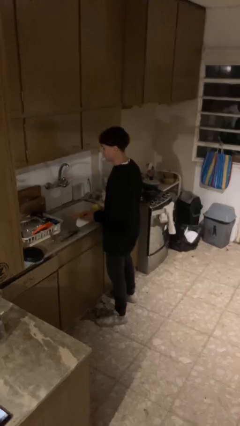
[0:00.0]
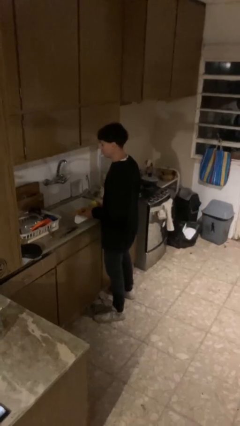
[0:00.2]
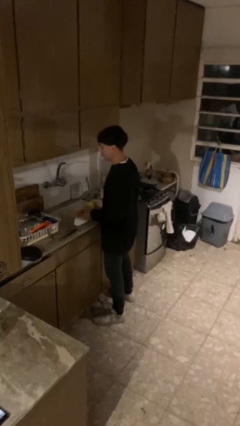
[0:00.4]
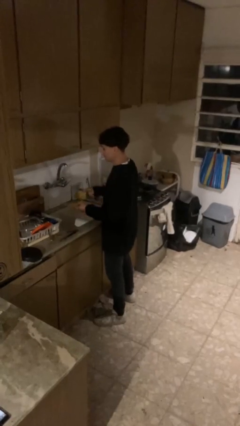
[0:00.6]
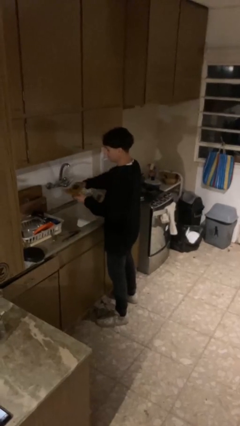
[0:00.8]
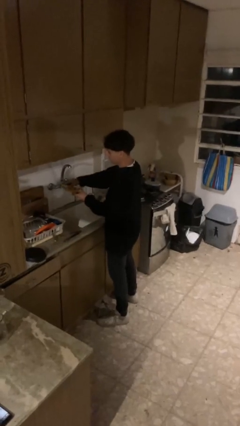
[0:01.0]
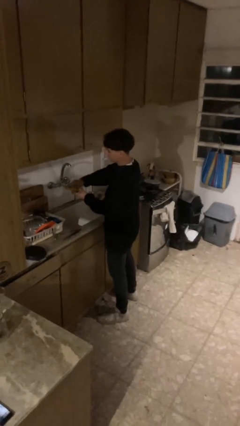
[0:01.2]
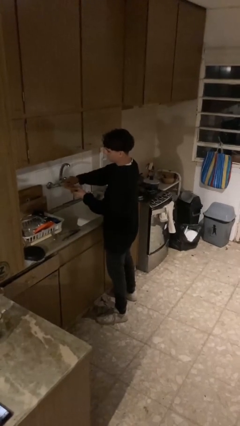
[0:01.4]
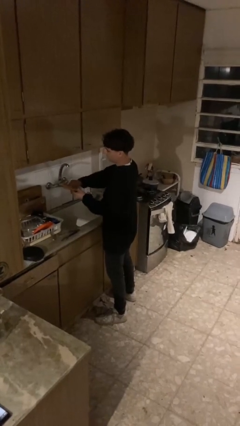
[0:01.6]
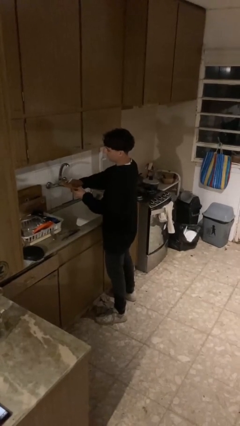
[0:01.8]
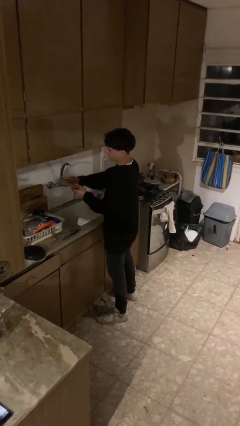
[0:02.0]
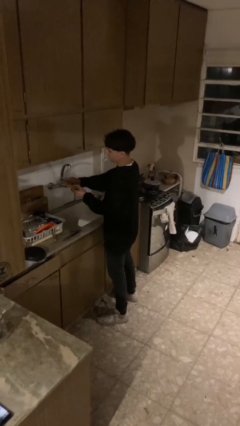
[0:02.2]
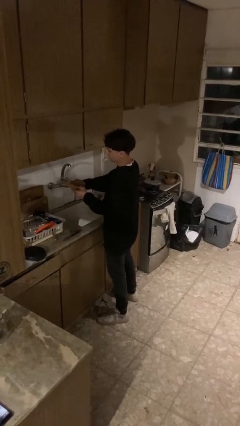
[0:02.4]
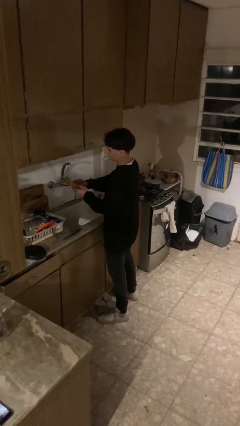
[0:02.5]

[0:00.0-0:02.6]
person washes dish

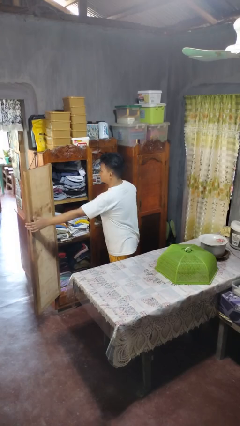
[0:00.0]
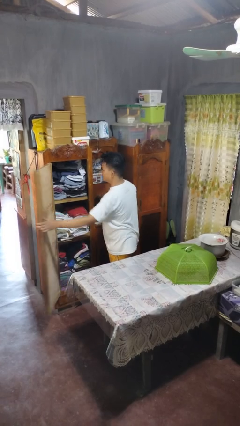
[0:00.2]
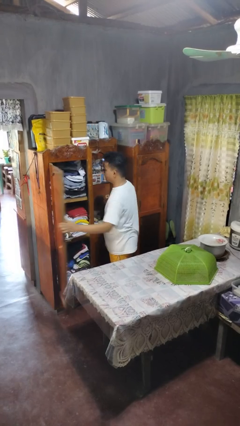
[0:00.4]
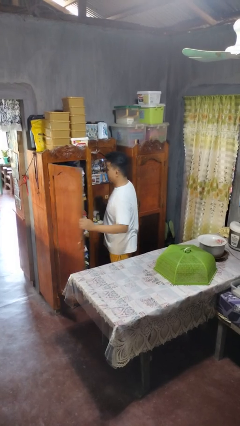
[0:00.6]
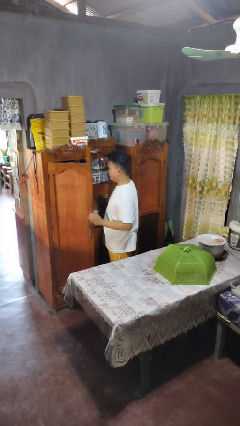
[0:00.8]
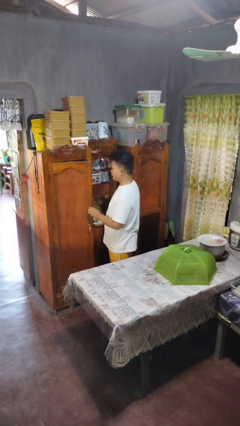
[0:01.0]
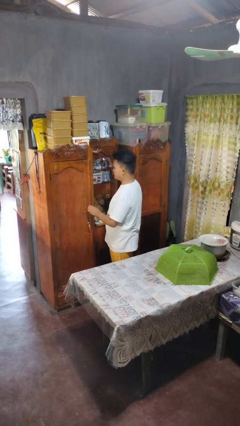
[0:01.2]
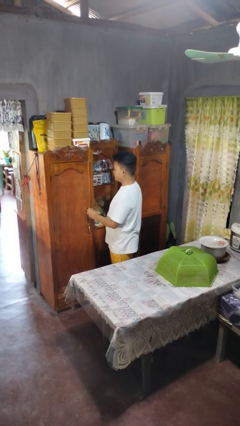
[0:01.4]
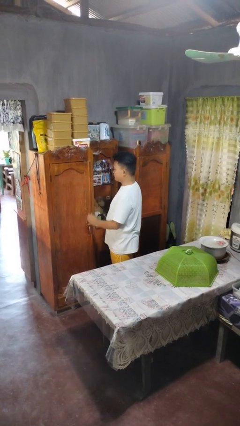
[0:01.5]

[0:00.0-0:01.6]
person closes closet door

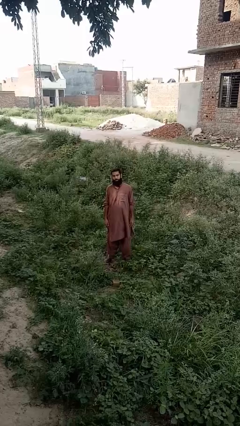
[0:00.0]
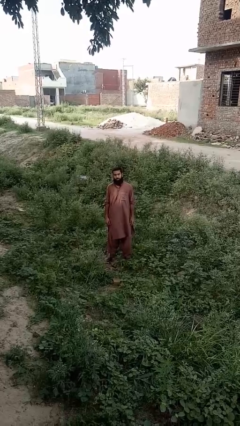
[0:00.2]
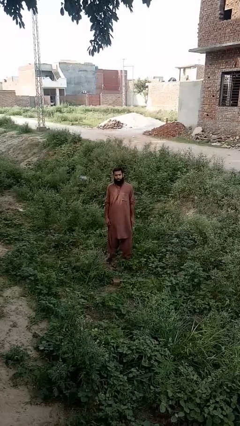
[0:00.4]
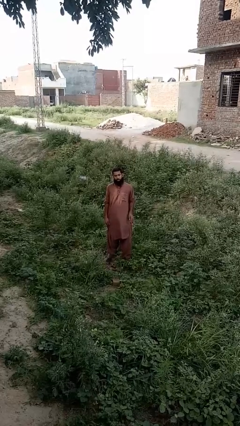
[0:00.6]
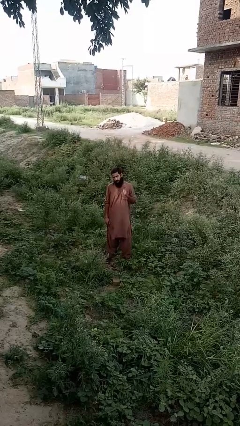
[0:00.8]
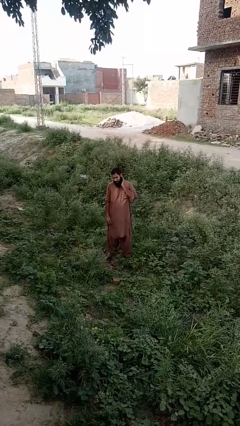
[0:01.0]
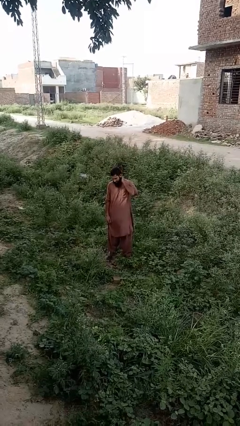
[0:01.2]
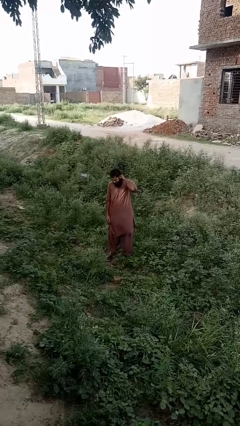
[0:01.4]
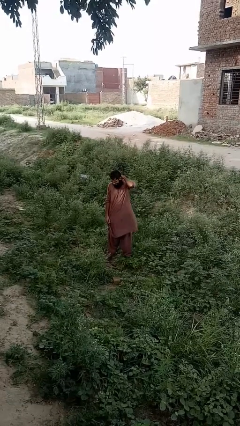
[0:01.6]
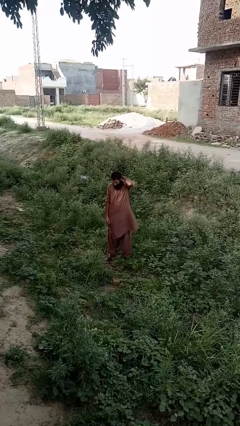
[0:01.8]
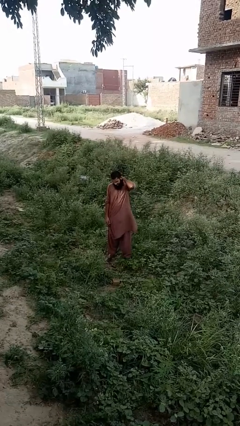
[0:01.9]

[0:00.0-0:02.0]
person rubs neck

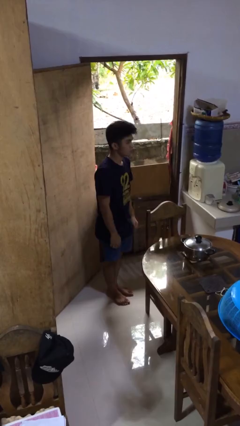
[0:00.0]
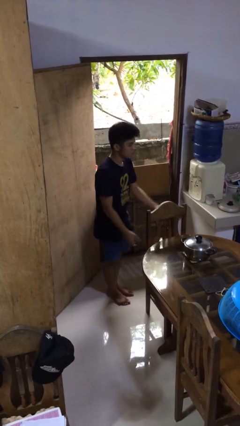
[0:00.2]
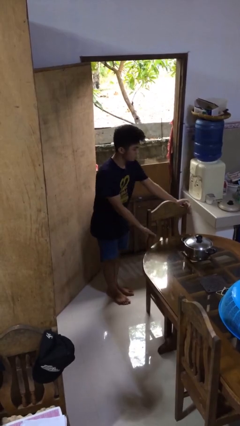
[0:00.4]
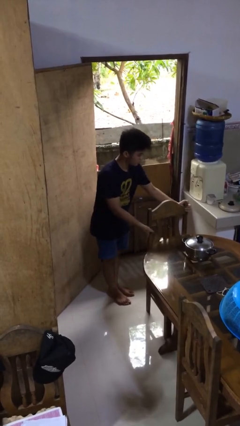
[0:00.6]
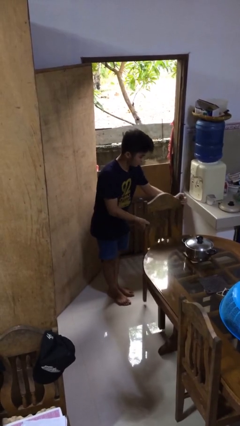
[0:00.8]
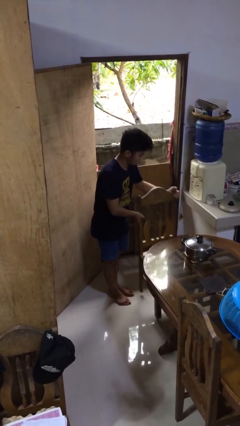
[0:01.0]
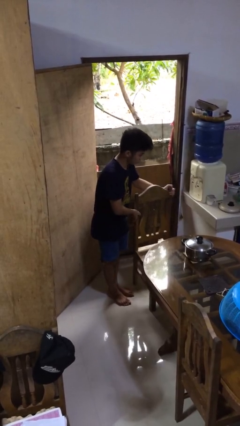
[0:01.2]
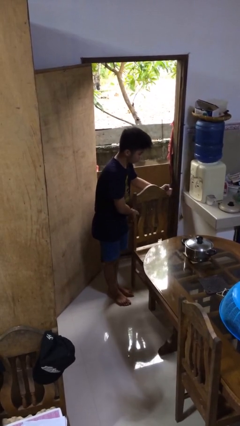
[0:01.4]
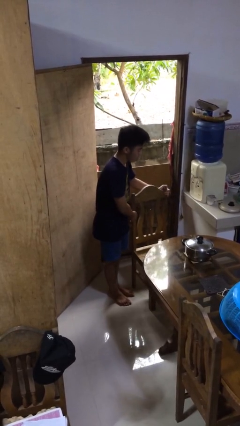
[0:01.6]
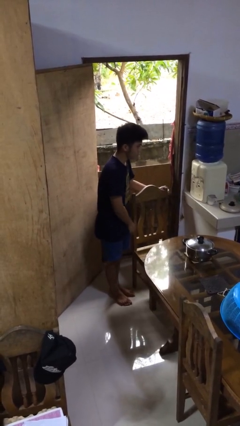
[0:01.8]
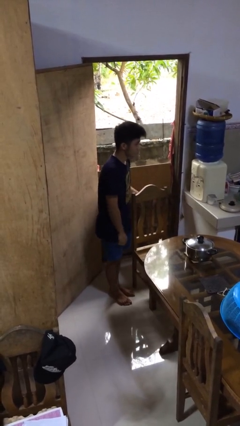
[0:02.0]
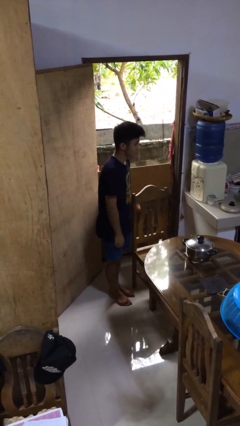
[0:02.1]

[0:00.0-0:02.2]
person pulls out chair

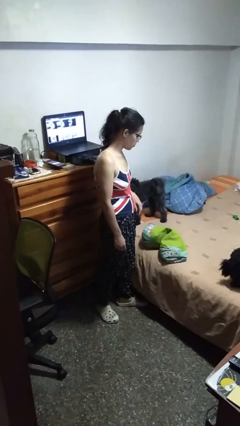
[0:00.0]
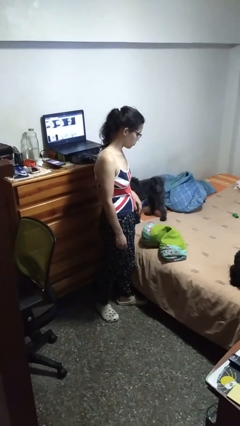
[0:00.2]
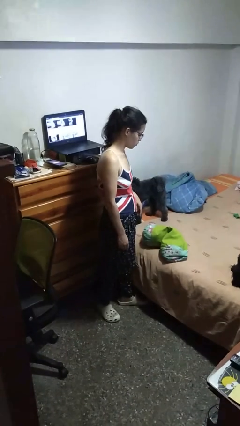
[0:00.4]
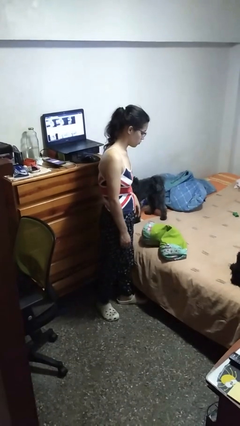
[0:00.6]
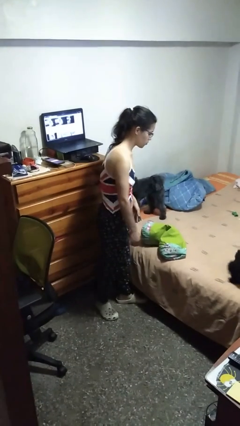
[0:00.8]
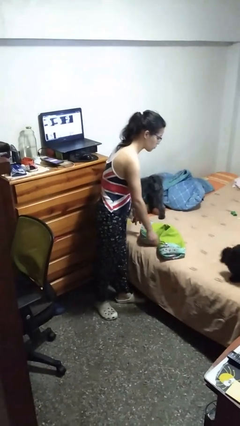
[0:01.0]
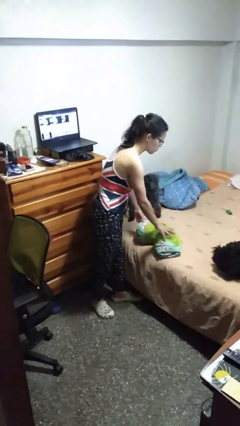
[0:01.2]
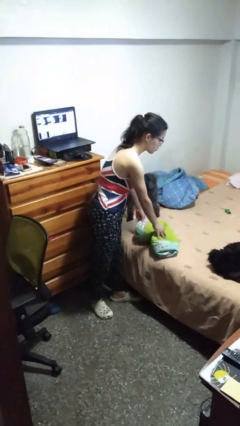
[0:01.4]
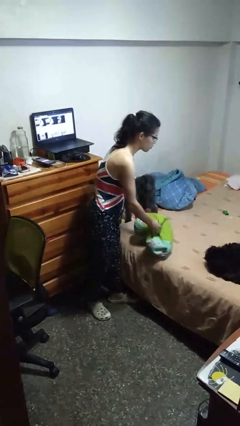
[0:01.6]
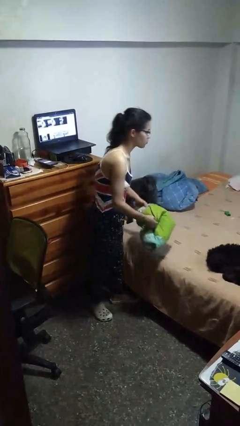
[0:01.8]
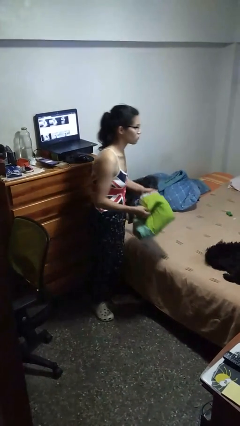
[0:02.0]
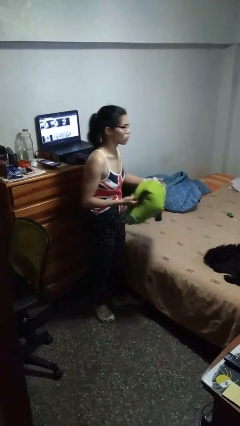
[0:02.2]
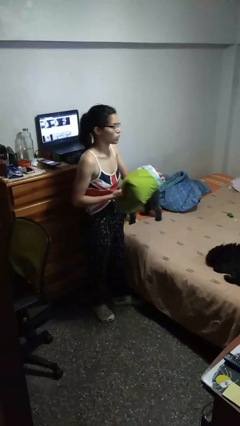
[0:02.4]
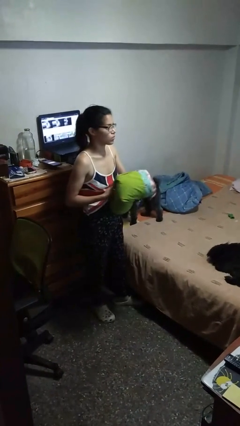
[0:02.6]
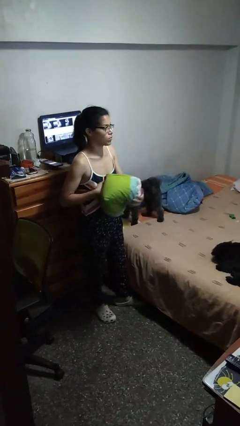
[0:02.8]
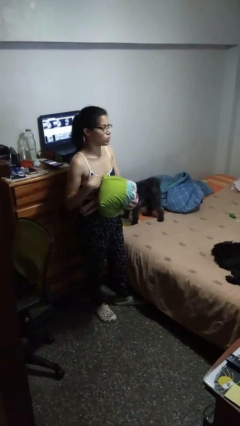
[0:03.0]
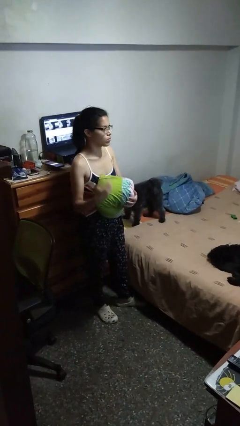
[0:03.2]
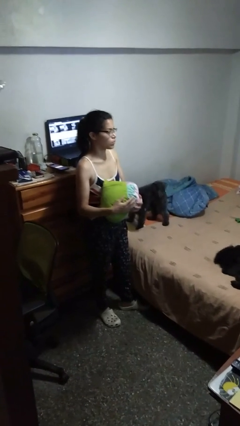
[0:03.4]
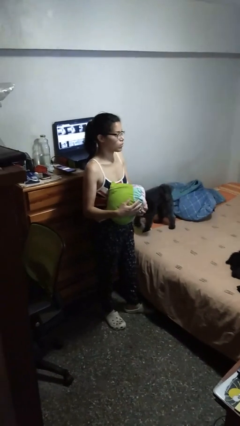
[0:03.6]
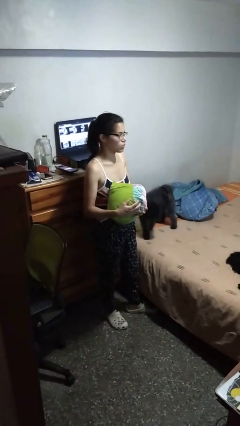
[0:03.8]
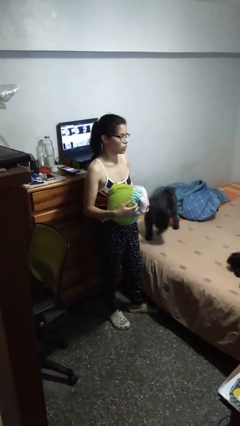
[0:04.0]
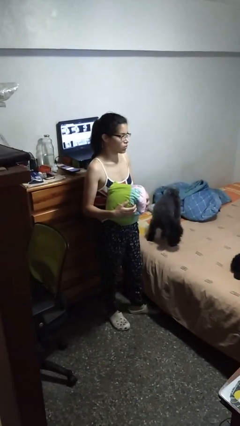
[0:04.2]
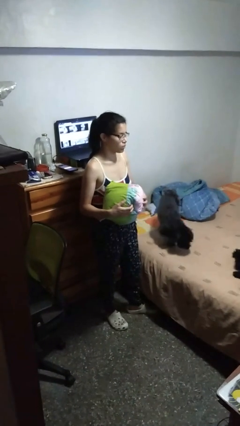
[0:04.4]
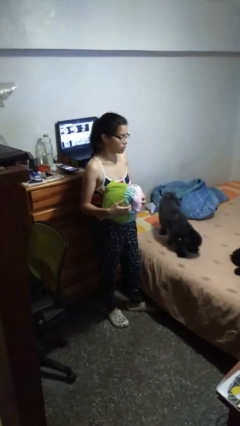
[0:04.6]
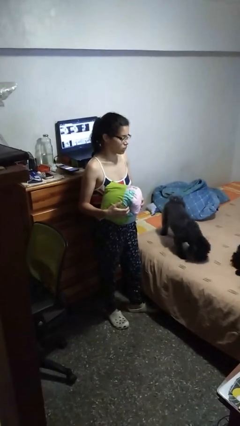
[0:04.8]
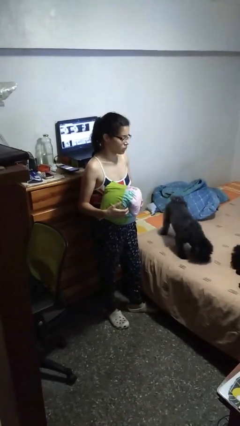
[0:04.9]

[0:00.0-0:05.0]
person picks up object from bed

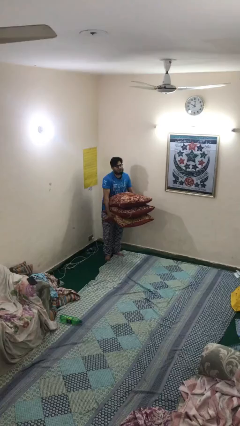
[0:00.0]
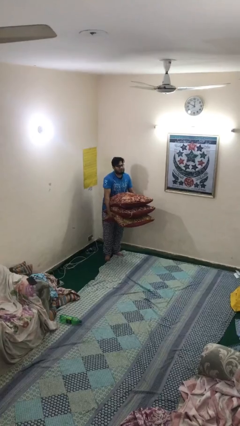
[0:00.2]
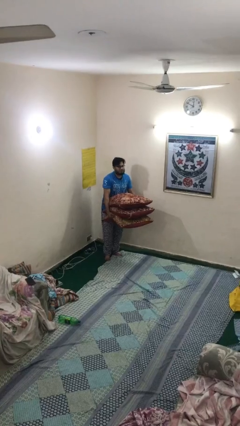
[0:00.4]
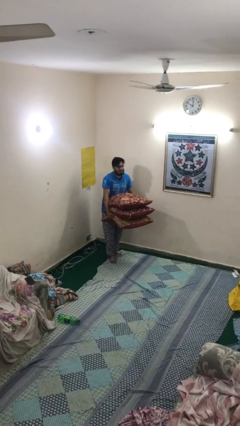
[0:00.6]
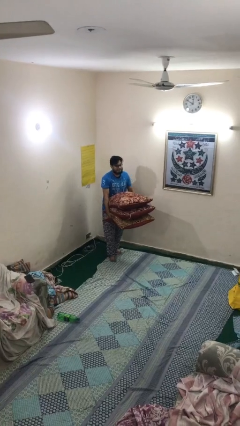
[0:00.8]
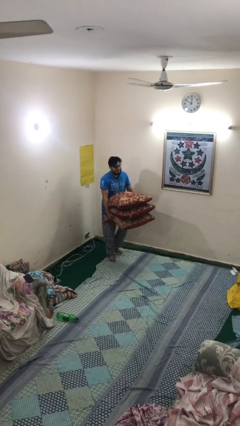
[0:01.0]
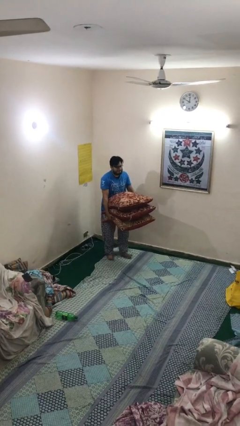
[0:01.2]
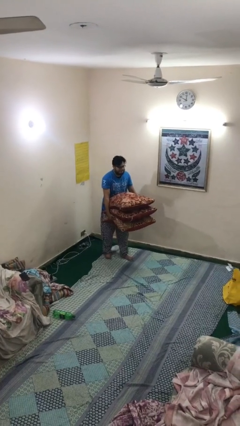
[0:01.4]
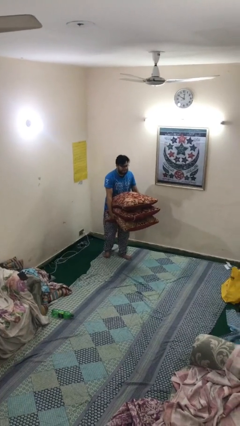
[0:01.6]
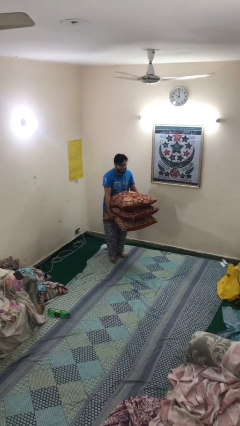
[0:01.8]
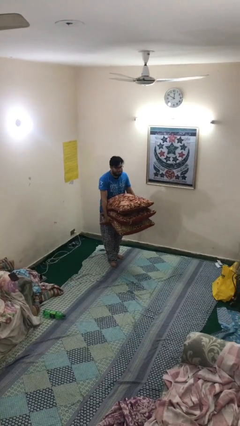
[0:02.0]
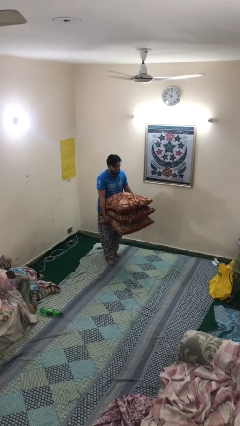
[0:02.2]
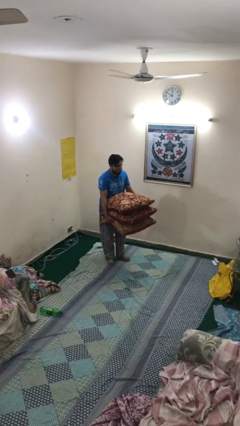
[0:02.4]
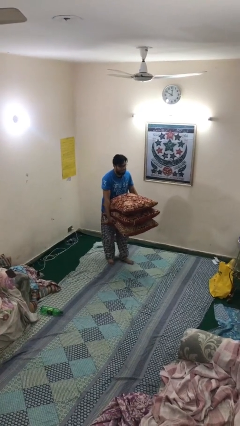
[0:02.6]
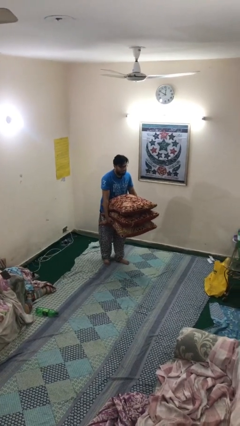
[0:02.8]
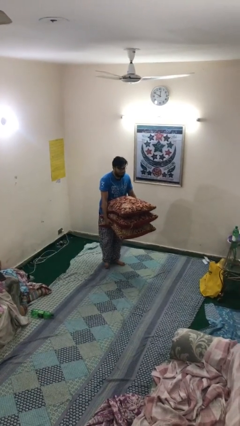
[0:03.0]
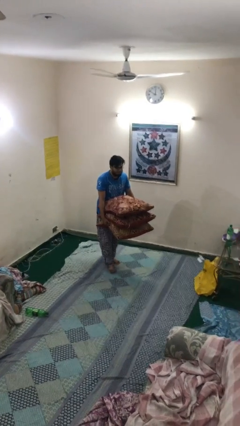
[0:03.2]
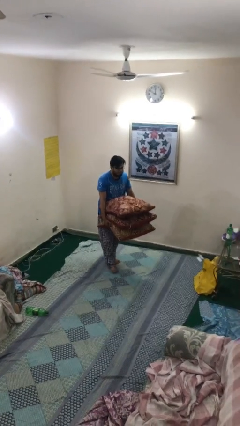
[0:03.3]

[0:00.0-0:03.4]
person carries heavy object

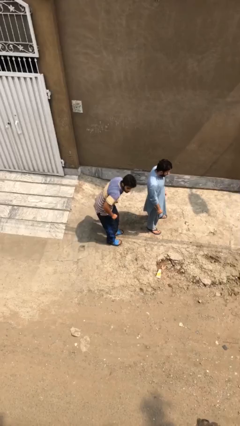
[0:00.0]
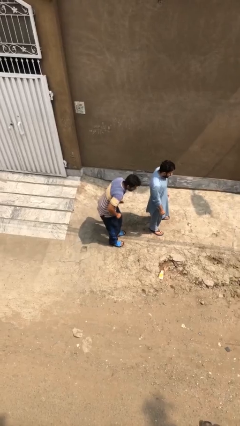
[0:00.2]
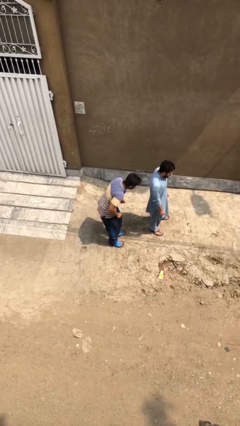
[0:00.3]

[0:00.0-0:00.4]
person steals object from person
